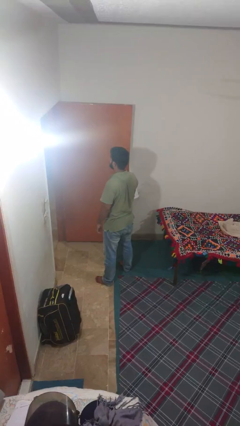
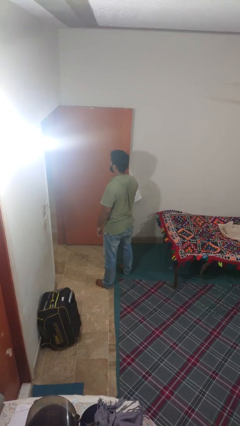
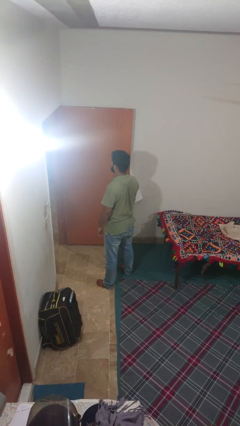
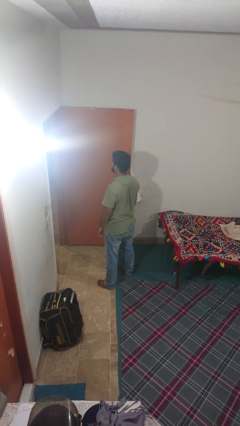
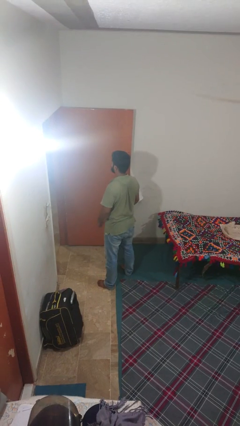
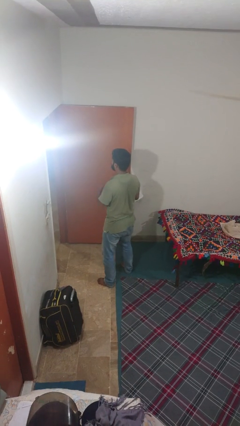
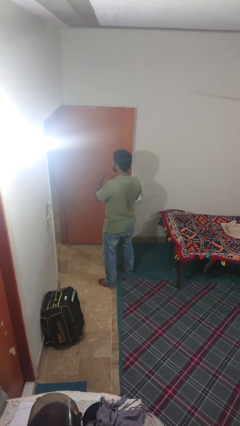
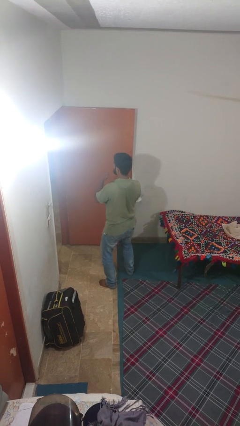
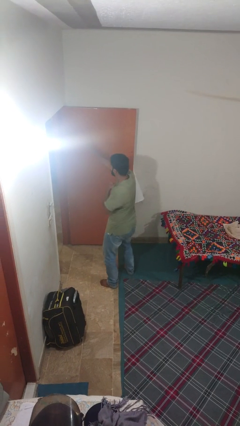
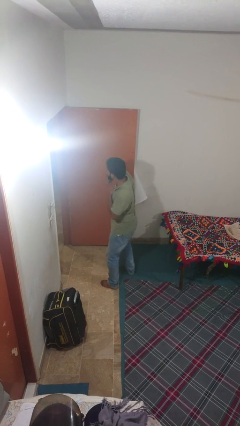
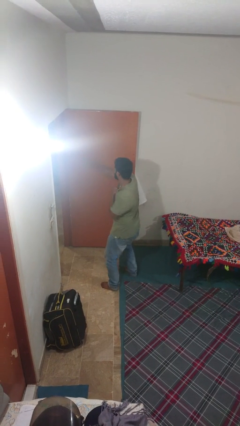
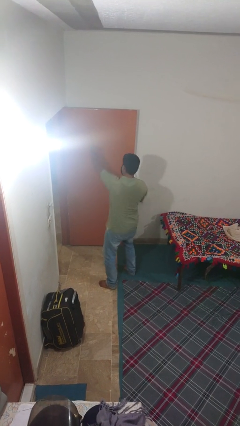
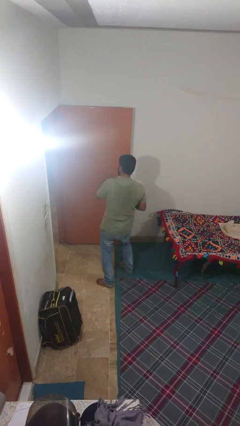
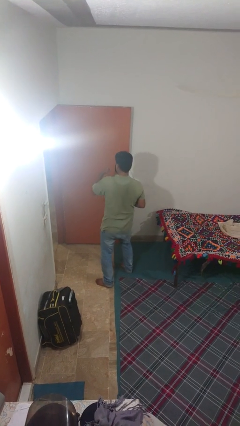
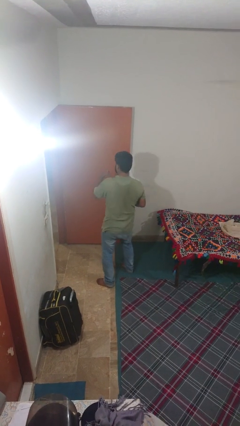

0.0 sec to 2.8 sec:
person punches

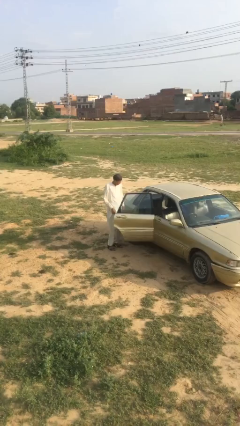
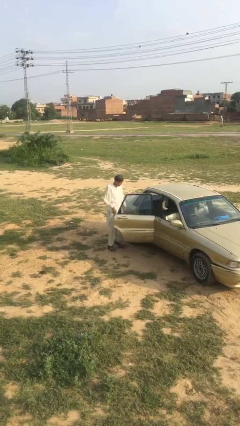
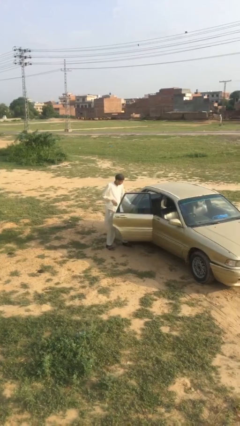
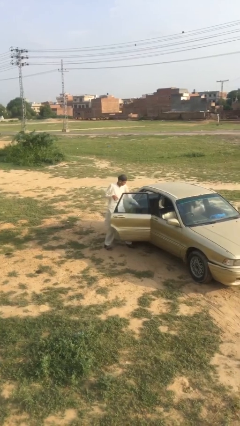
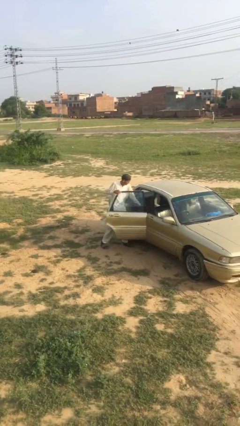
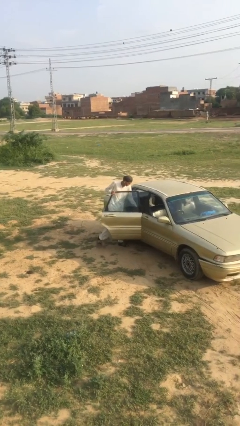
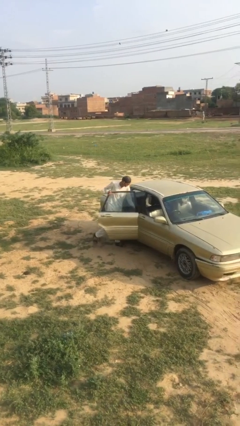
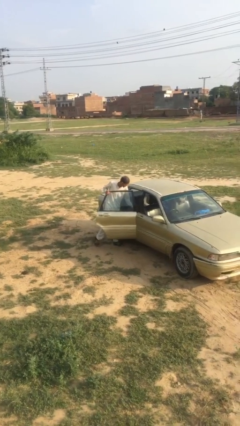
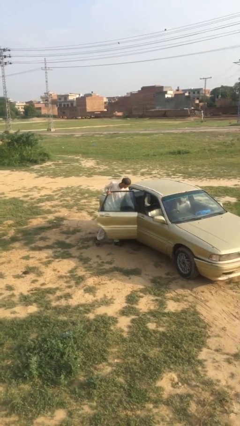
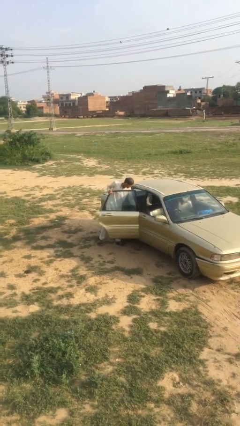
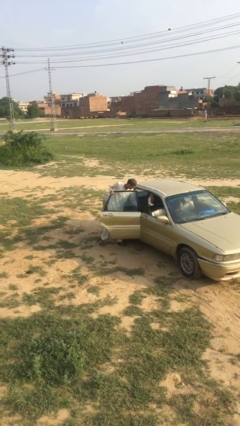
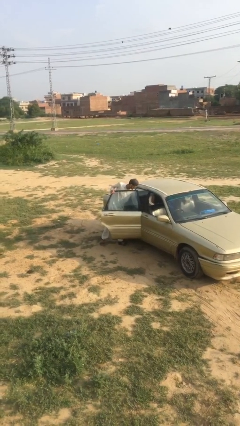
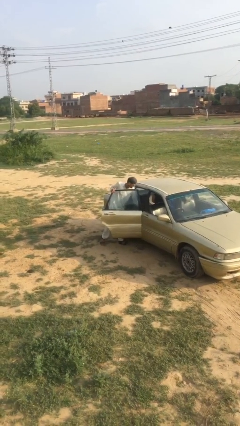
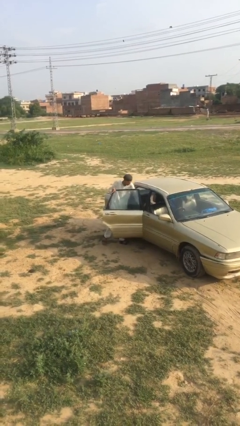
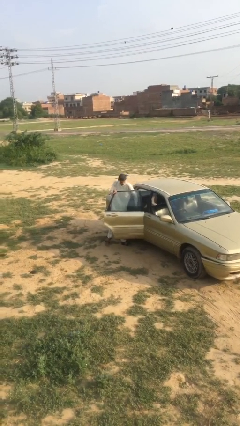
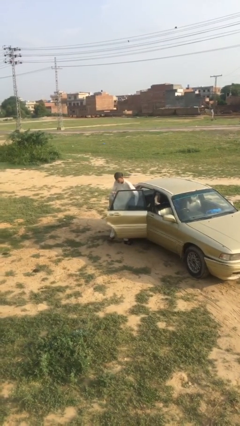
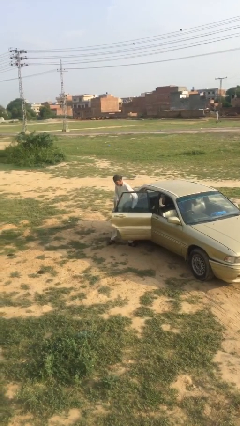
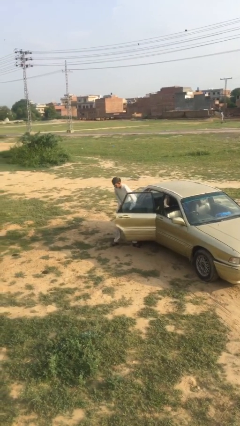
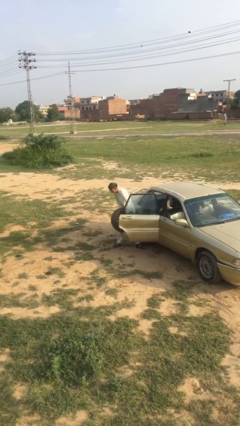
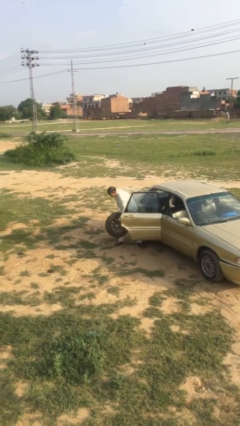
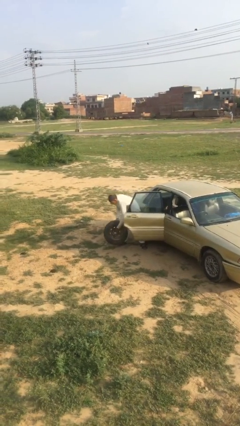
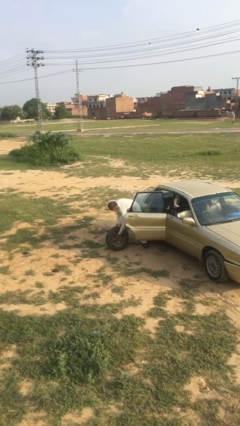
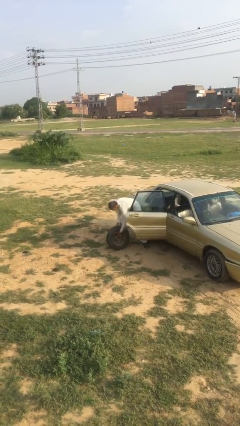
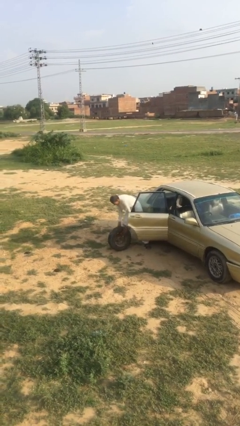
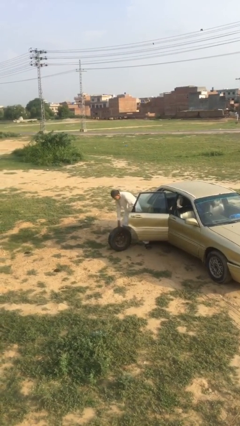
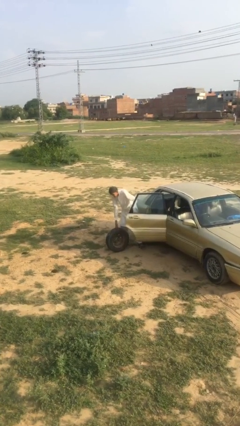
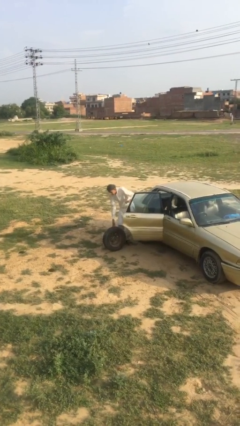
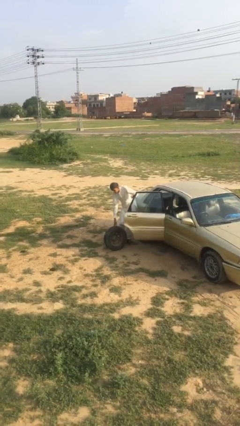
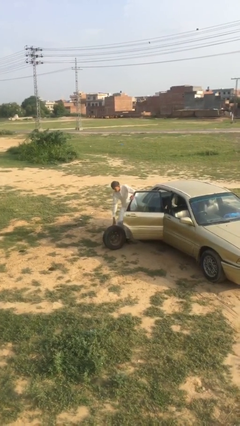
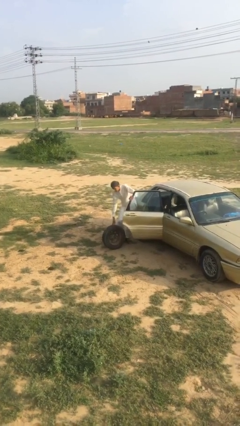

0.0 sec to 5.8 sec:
person unloads car

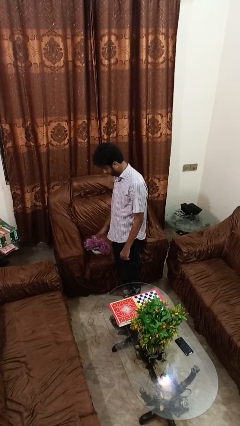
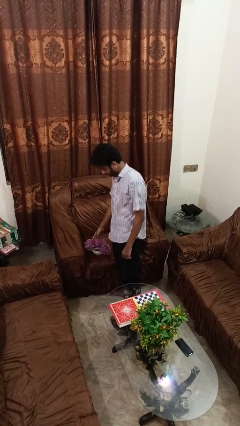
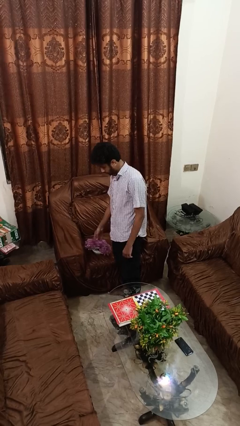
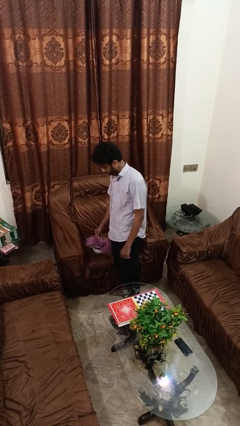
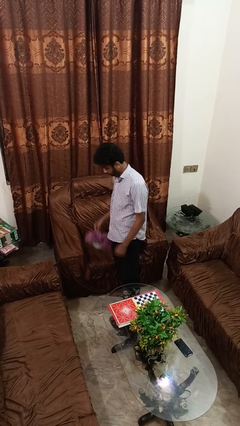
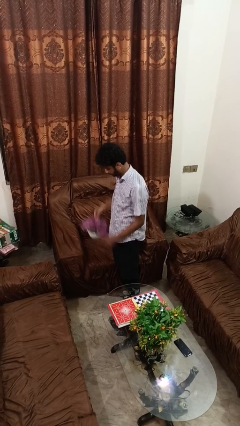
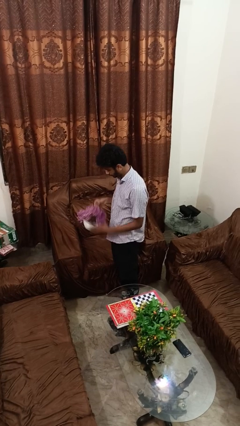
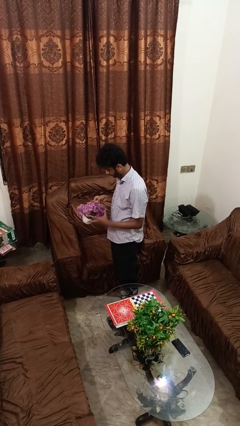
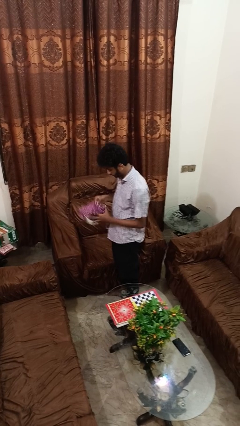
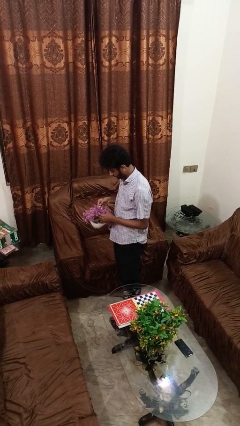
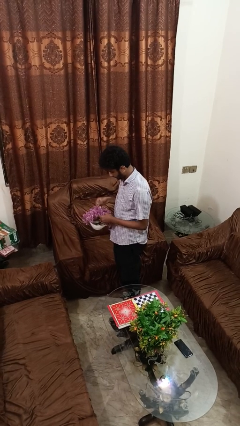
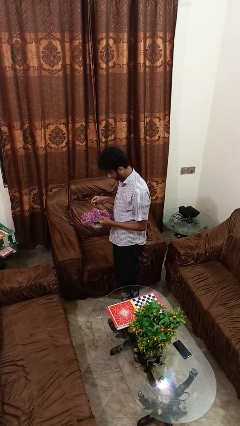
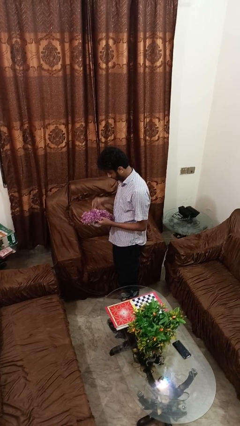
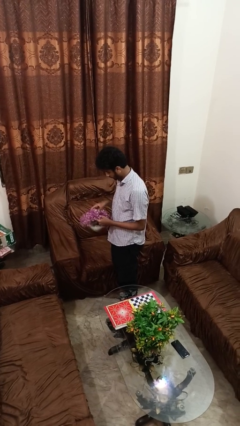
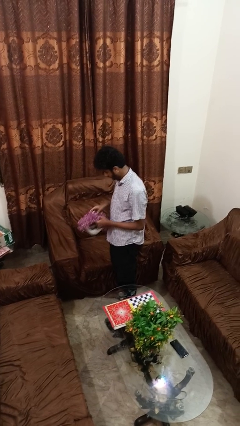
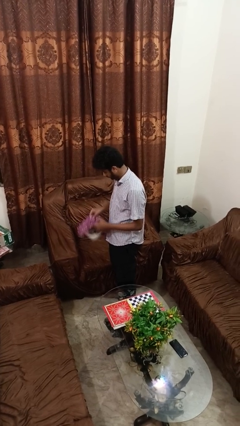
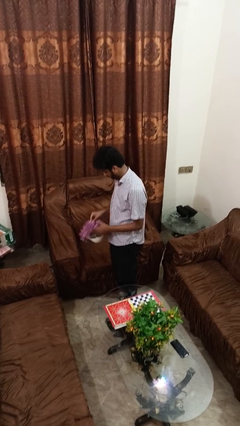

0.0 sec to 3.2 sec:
person picks up object from couch

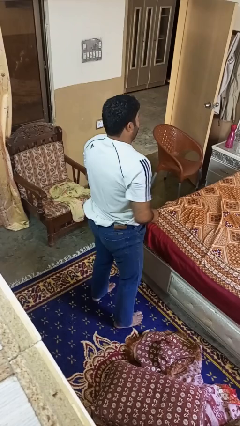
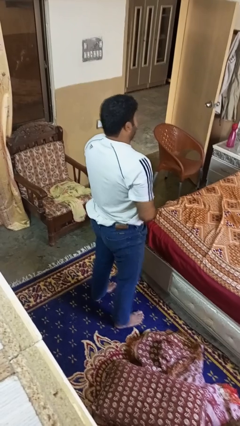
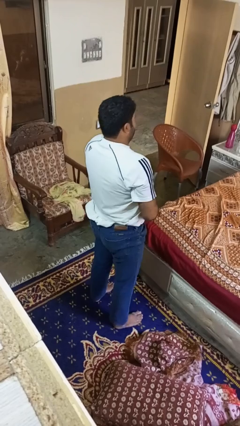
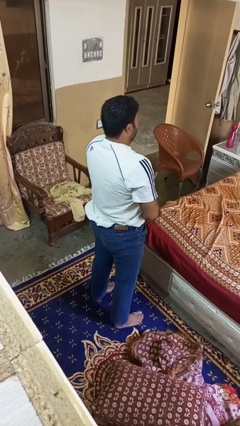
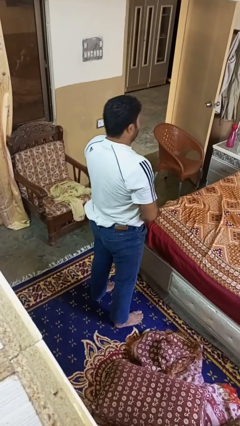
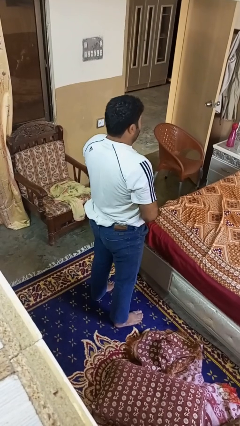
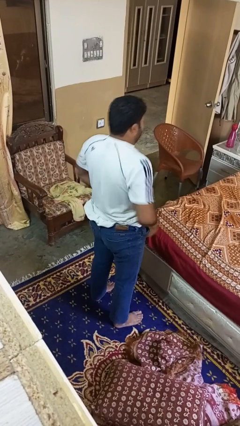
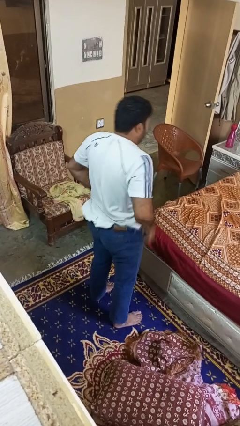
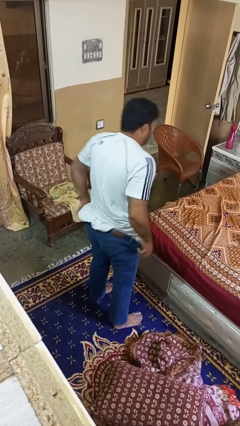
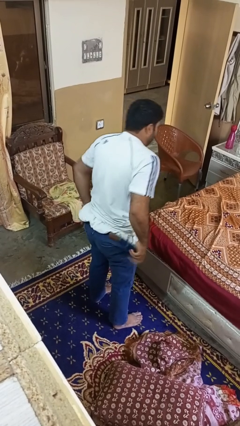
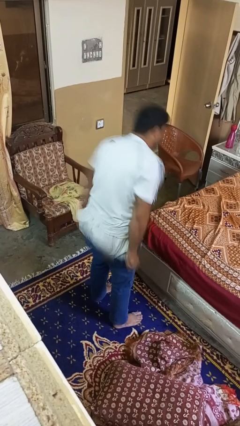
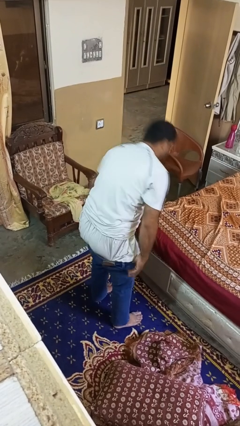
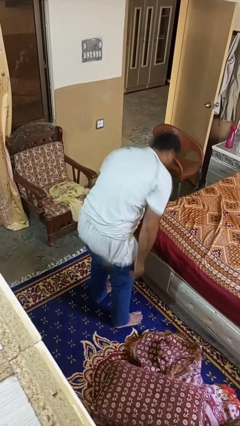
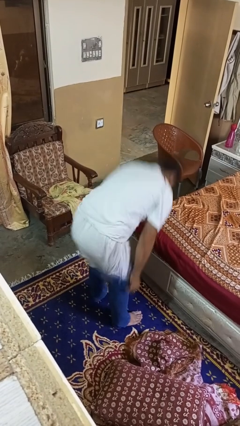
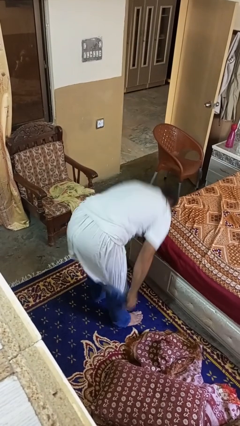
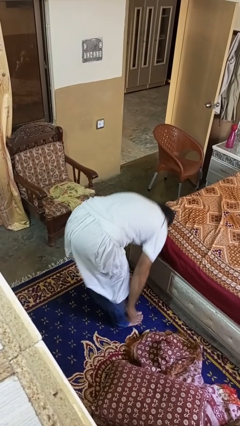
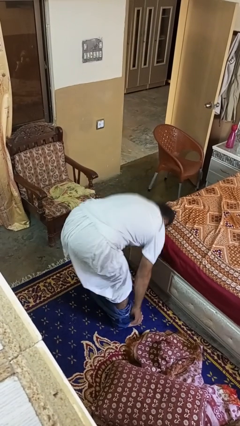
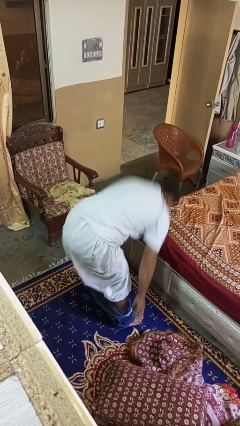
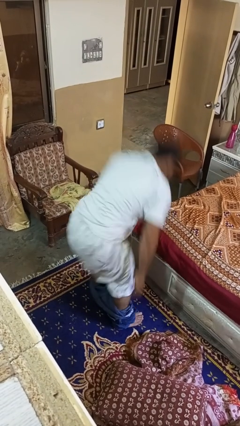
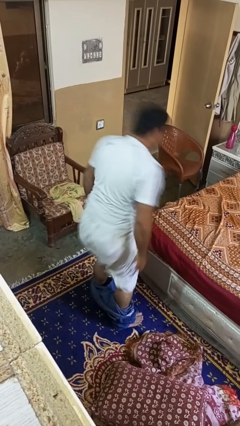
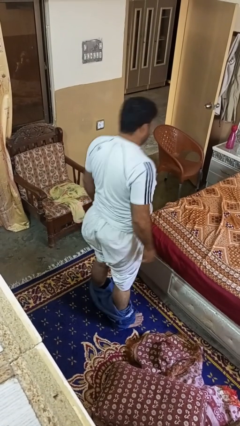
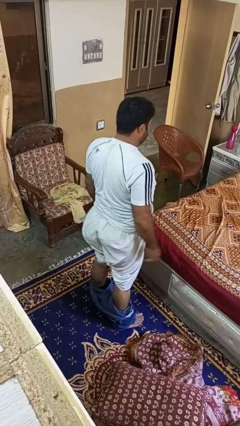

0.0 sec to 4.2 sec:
person takes off pants

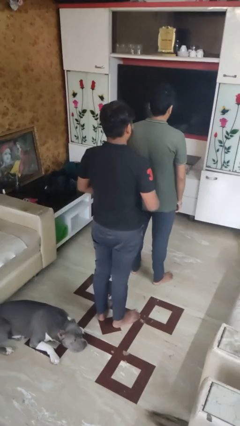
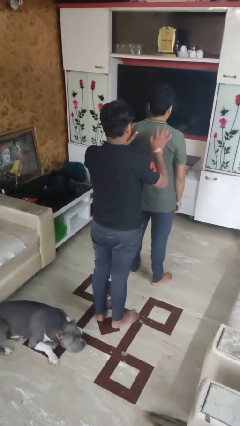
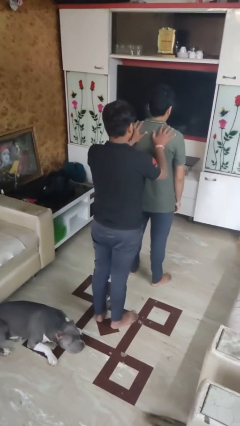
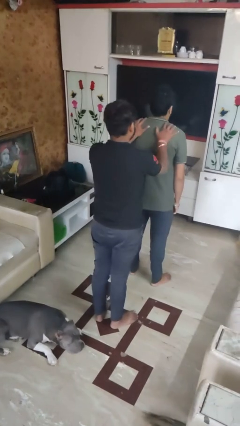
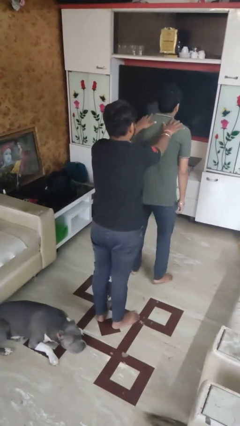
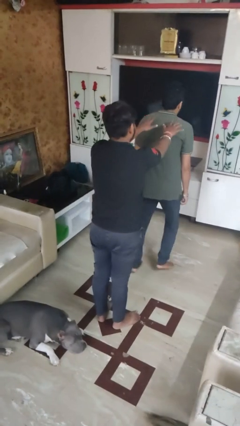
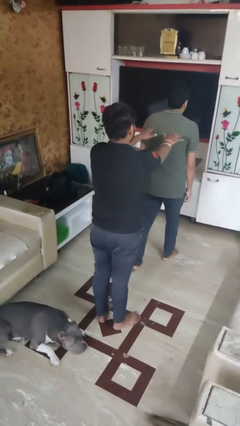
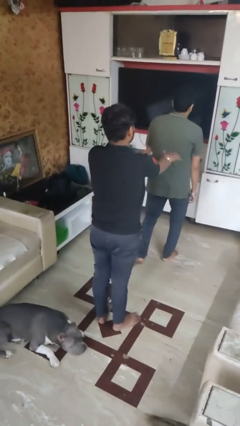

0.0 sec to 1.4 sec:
person shoves person
